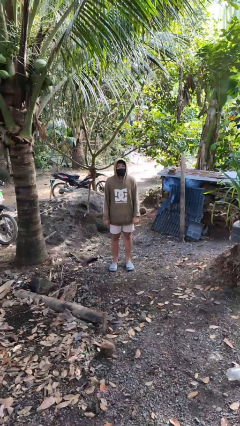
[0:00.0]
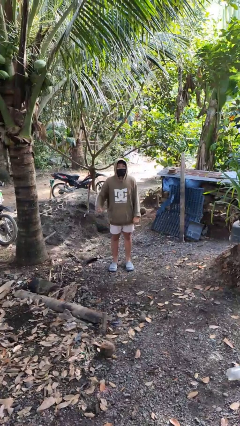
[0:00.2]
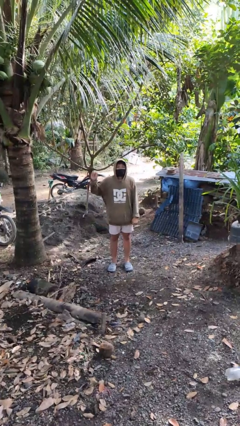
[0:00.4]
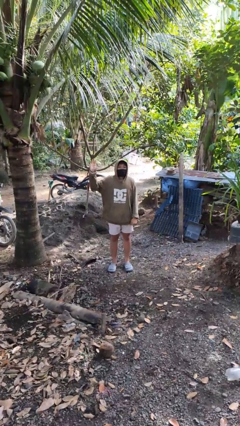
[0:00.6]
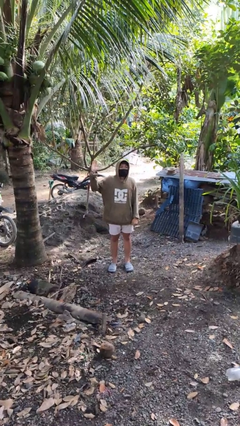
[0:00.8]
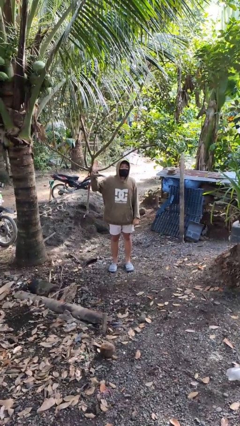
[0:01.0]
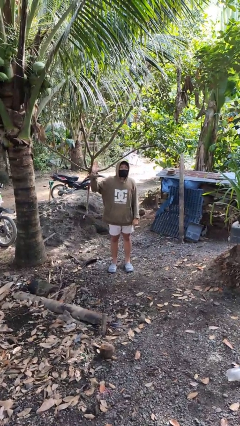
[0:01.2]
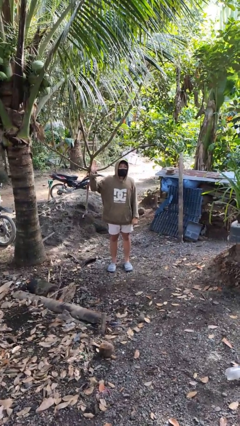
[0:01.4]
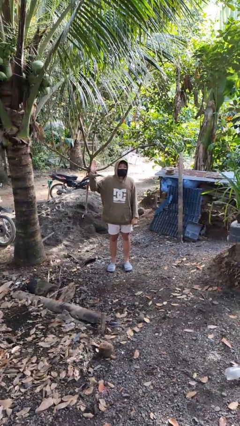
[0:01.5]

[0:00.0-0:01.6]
person gestures number five

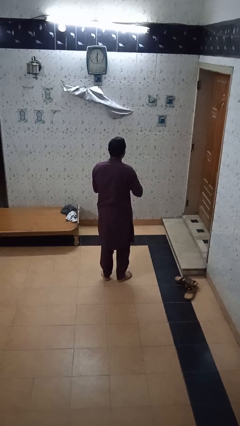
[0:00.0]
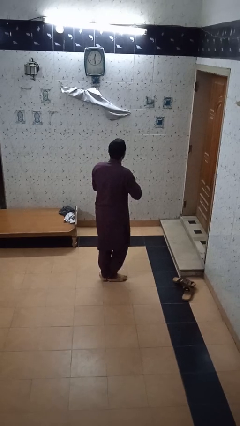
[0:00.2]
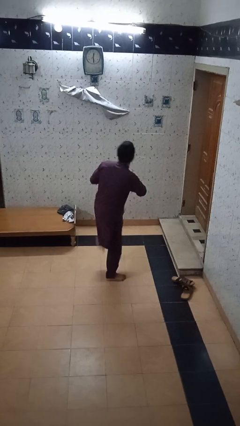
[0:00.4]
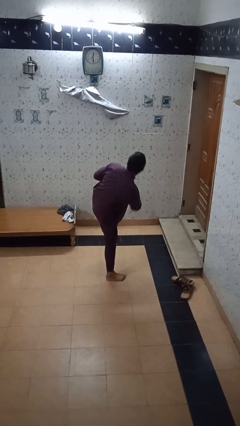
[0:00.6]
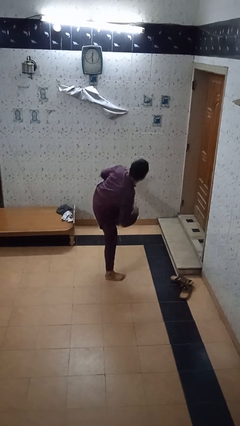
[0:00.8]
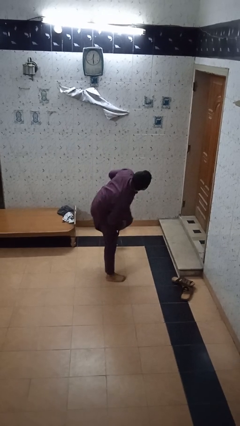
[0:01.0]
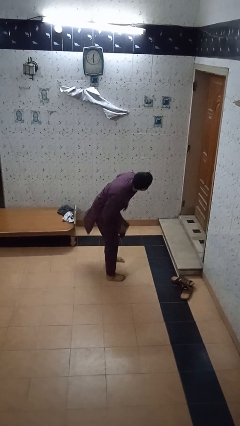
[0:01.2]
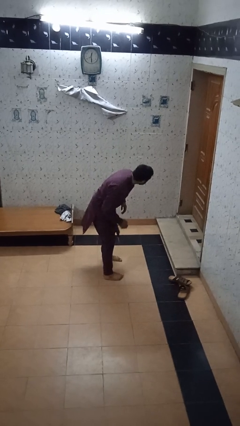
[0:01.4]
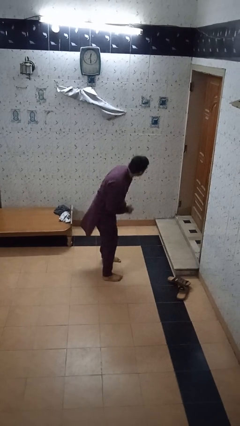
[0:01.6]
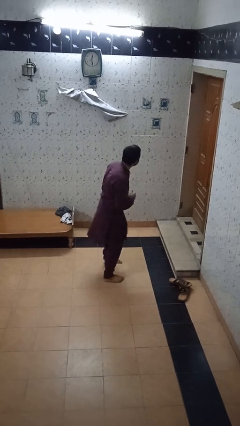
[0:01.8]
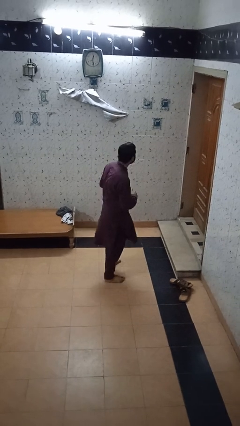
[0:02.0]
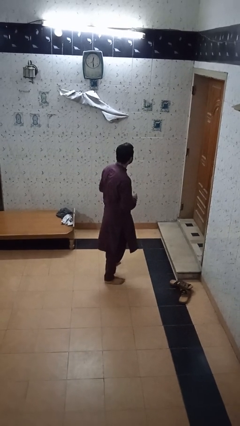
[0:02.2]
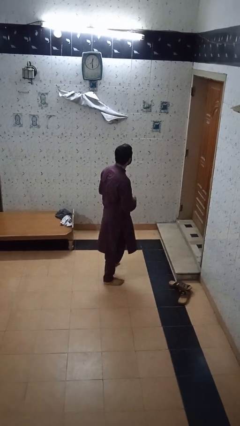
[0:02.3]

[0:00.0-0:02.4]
person karate kicks

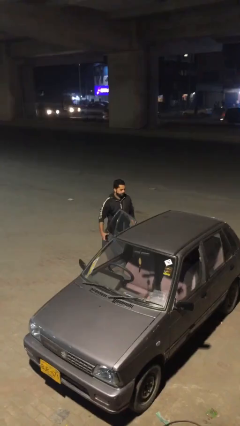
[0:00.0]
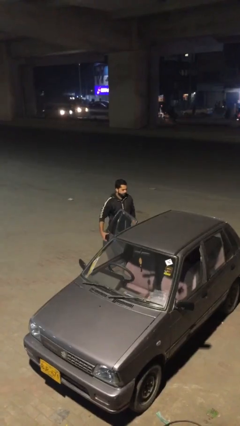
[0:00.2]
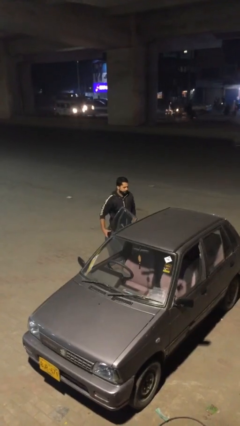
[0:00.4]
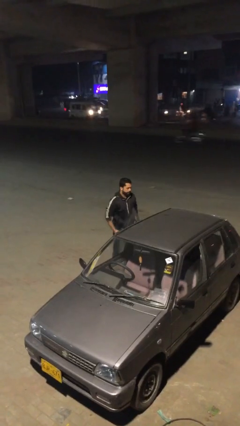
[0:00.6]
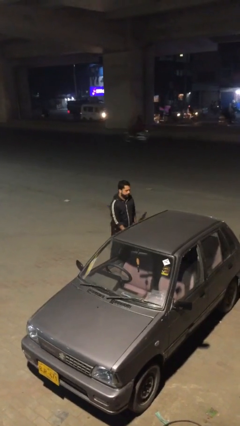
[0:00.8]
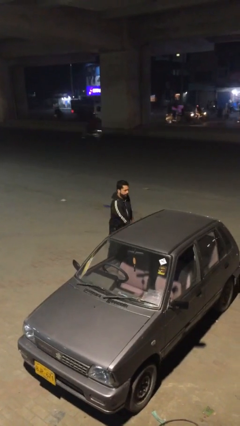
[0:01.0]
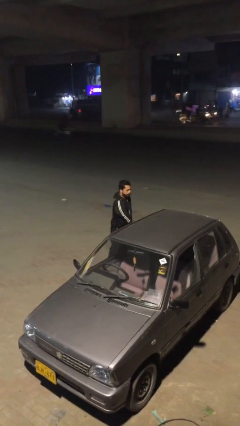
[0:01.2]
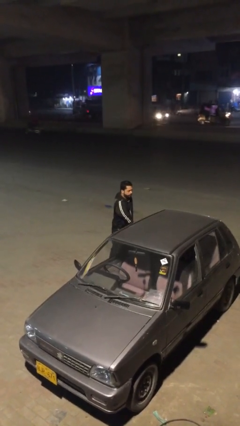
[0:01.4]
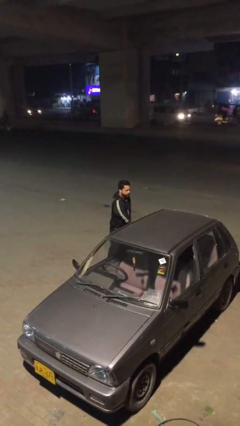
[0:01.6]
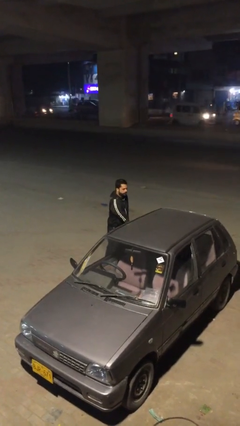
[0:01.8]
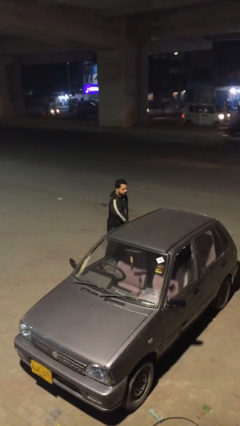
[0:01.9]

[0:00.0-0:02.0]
person closes car door

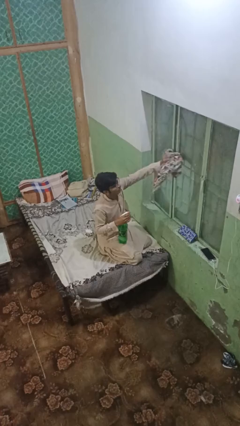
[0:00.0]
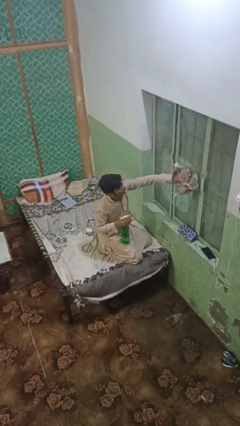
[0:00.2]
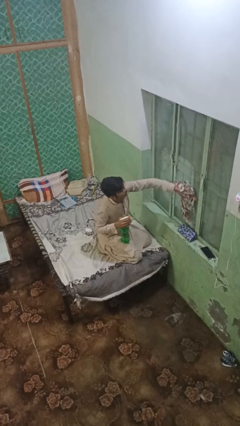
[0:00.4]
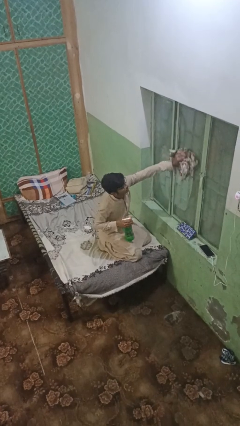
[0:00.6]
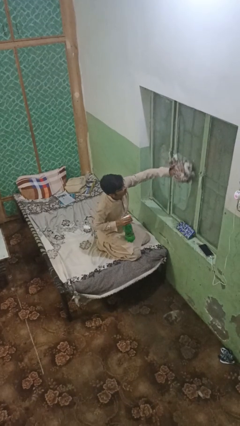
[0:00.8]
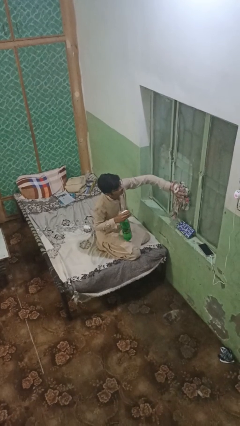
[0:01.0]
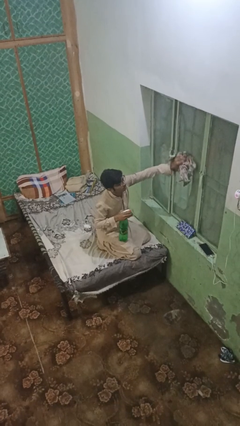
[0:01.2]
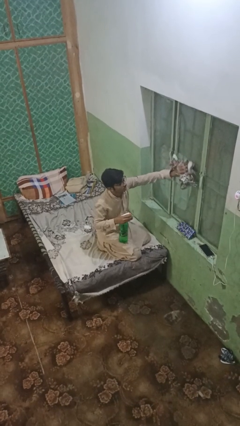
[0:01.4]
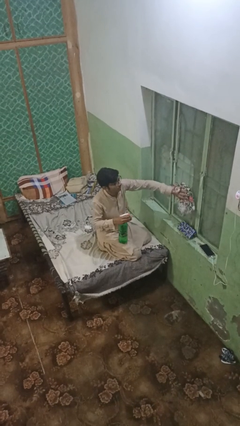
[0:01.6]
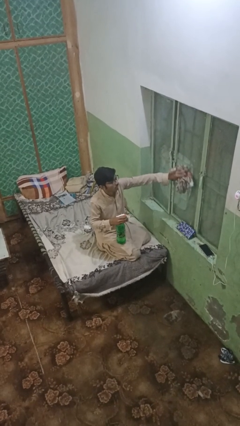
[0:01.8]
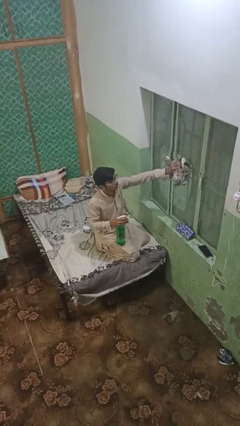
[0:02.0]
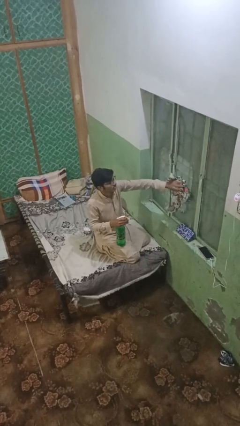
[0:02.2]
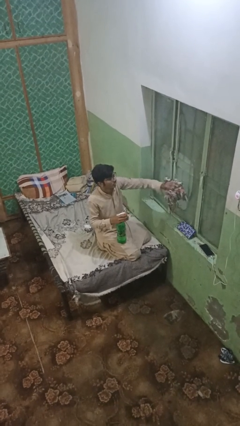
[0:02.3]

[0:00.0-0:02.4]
person washes window

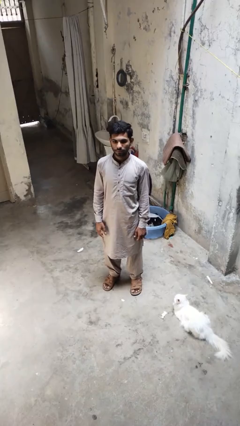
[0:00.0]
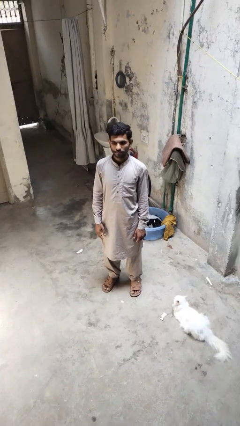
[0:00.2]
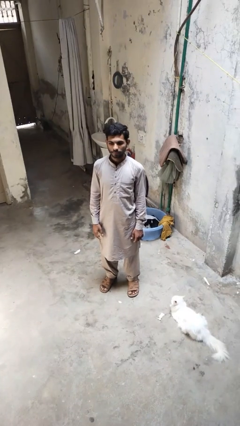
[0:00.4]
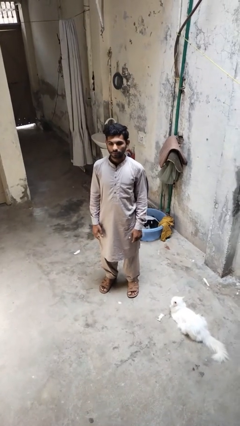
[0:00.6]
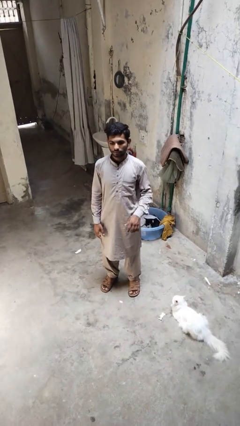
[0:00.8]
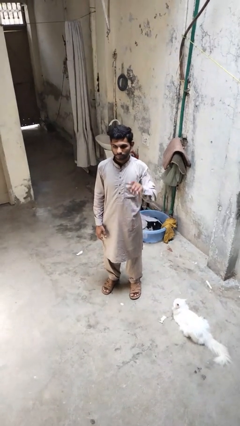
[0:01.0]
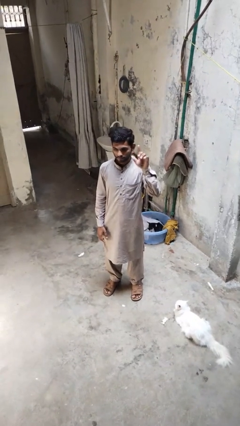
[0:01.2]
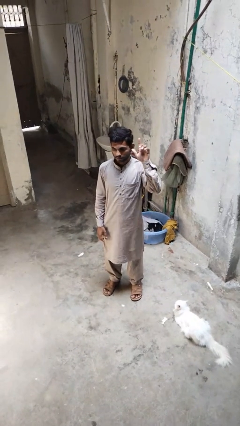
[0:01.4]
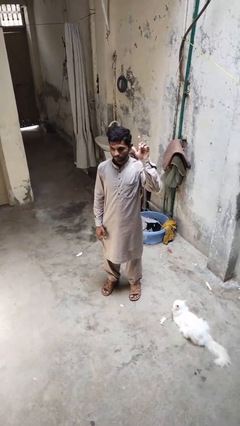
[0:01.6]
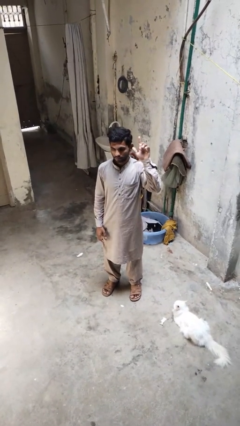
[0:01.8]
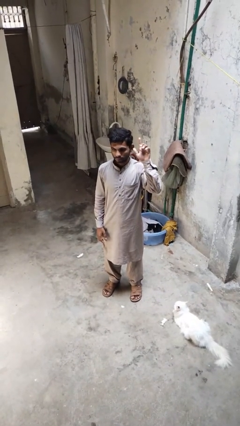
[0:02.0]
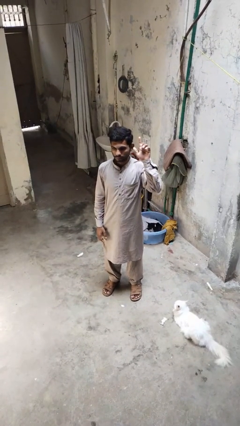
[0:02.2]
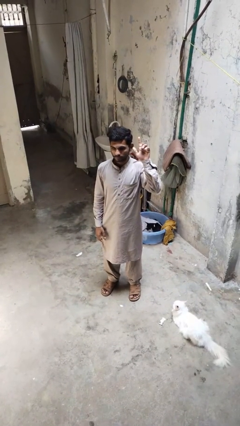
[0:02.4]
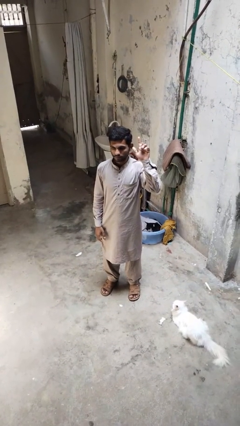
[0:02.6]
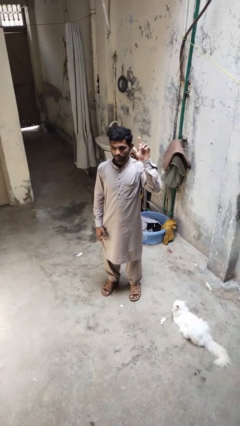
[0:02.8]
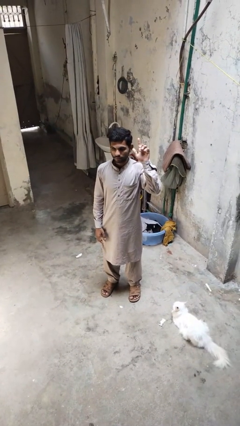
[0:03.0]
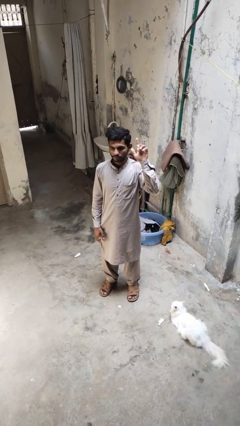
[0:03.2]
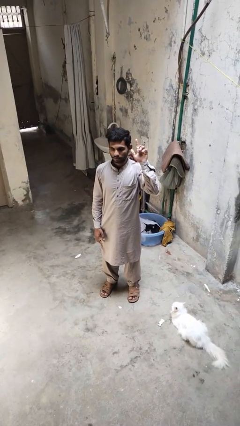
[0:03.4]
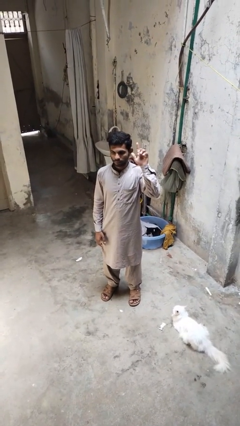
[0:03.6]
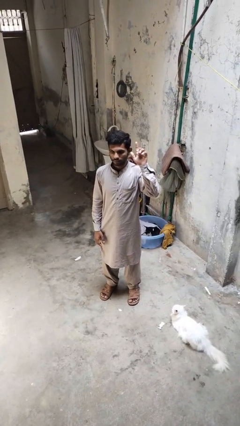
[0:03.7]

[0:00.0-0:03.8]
person gestures raise hand

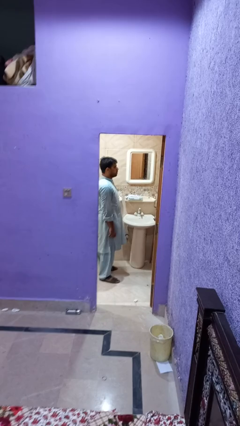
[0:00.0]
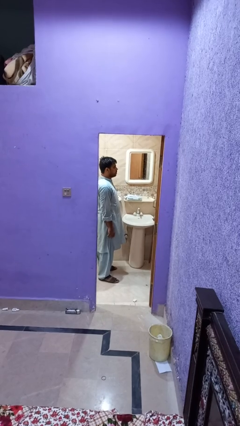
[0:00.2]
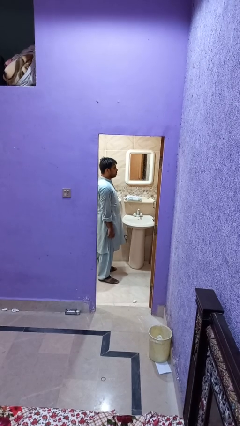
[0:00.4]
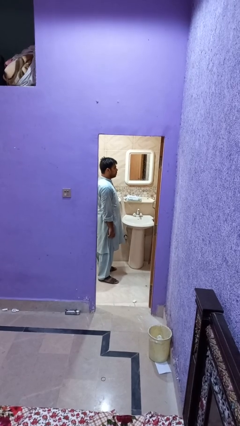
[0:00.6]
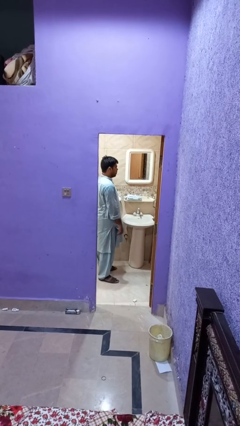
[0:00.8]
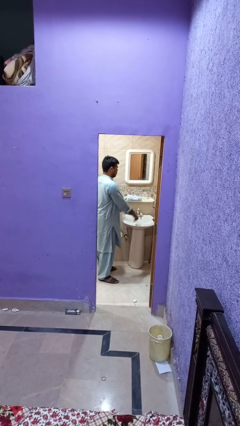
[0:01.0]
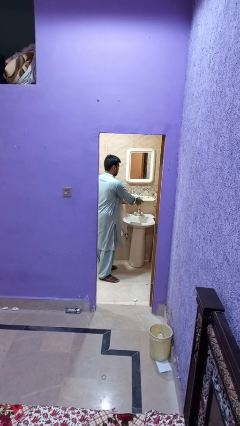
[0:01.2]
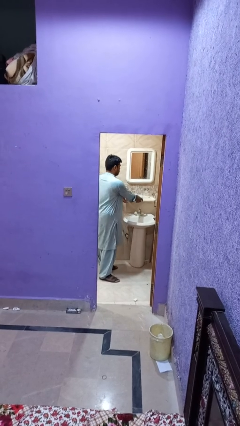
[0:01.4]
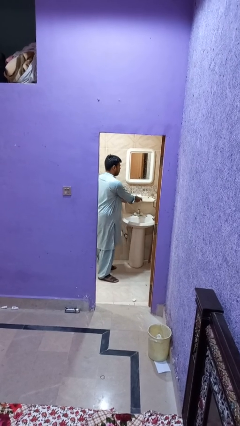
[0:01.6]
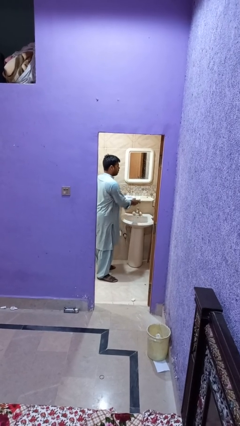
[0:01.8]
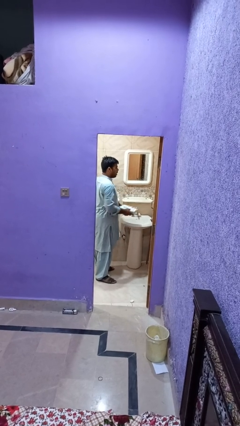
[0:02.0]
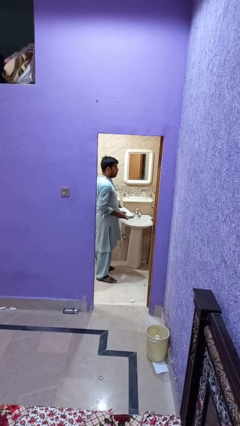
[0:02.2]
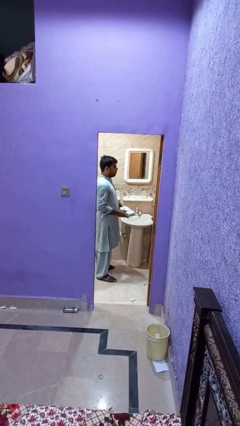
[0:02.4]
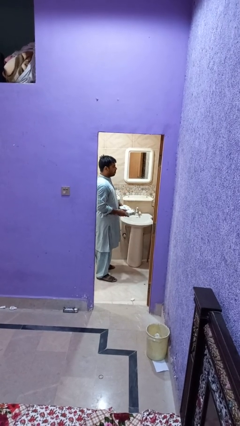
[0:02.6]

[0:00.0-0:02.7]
person picks up object from countertop

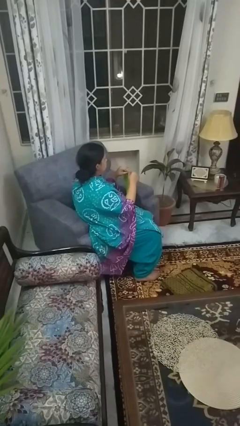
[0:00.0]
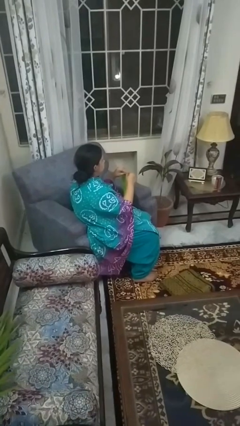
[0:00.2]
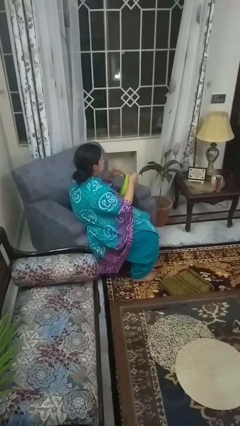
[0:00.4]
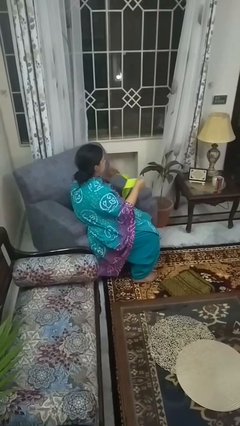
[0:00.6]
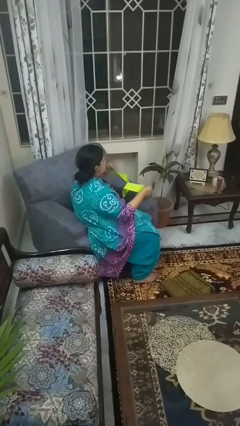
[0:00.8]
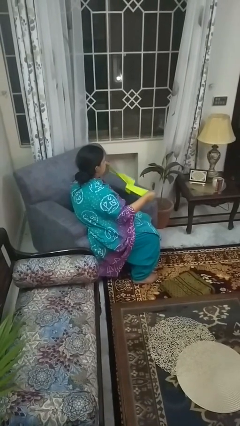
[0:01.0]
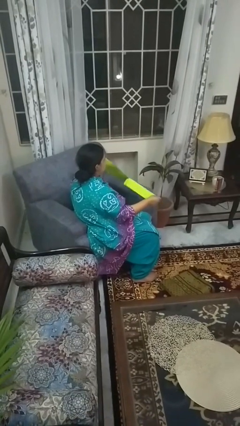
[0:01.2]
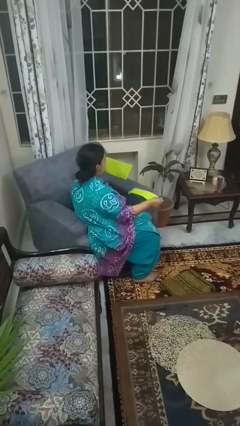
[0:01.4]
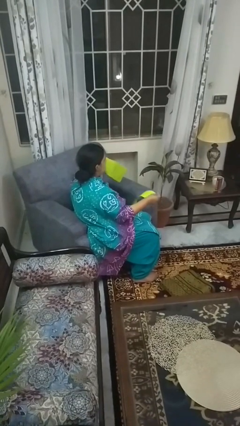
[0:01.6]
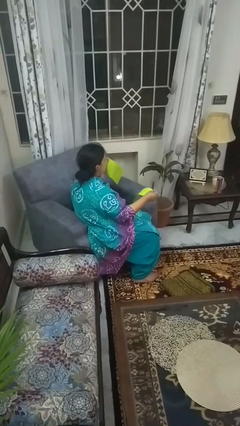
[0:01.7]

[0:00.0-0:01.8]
person tears paper

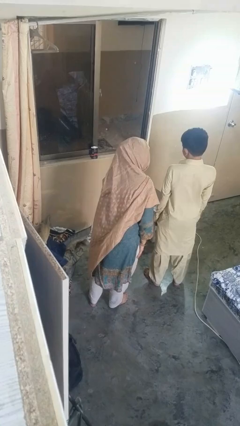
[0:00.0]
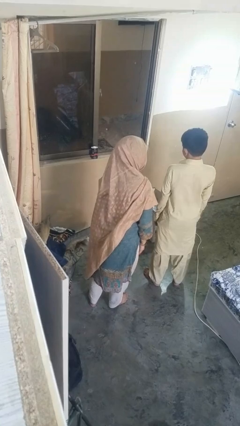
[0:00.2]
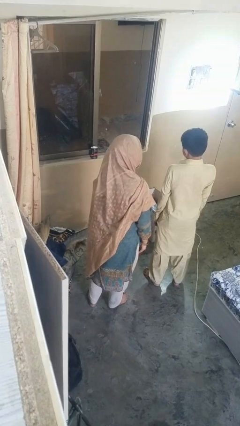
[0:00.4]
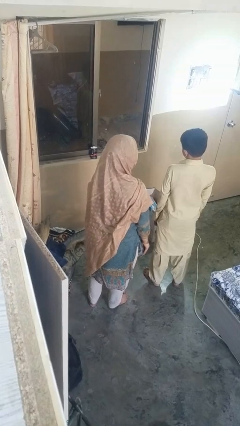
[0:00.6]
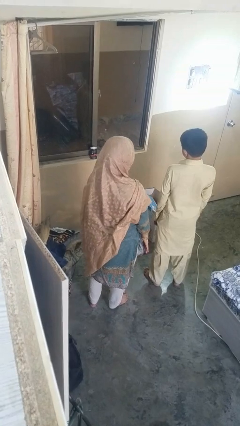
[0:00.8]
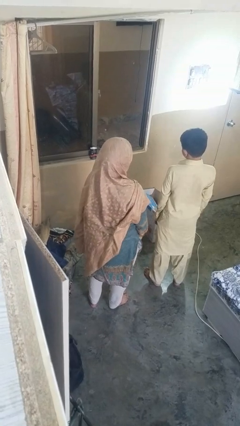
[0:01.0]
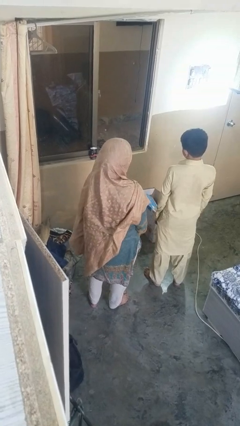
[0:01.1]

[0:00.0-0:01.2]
person laughs with person
